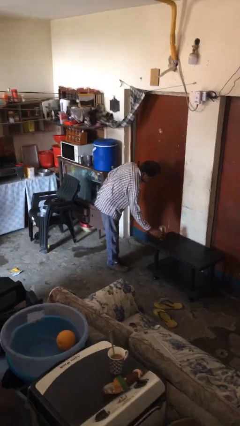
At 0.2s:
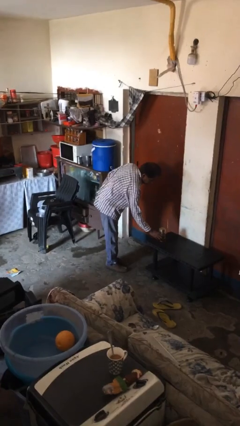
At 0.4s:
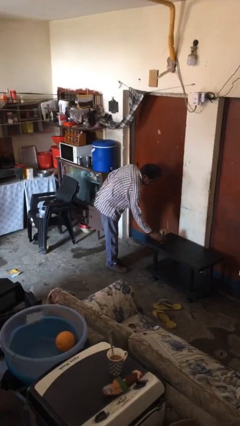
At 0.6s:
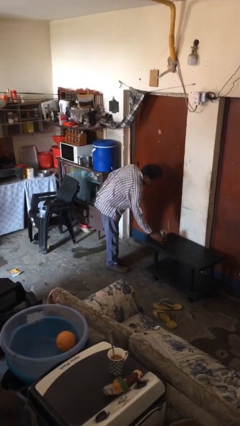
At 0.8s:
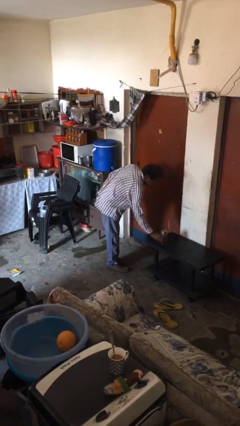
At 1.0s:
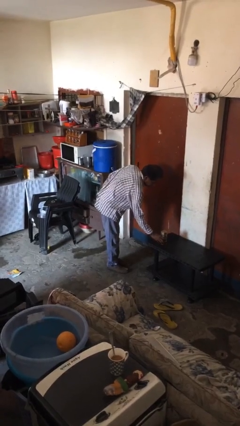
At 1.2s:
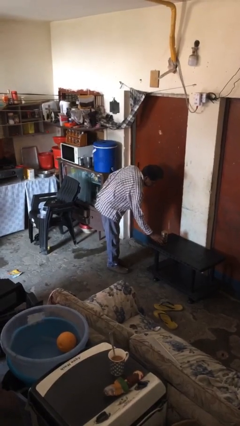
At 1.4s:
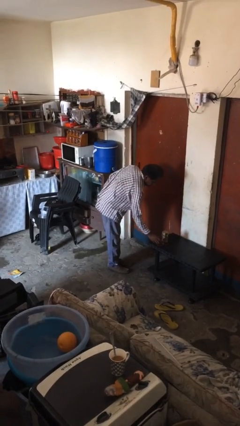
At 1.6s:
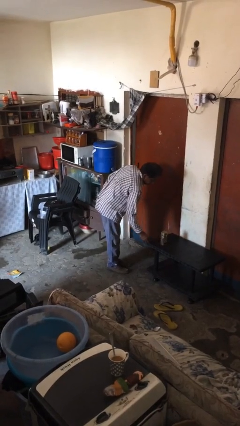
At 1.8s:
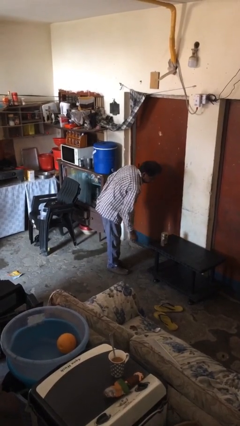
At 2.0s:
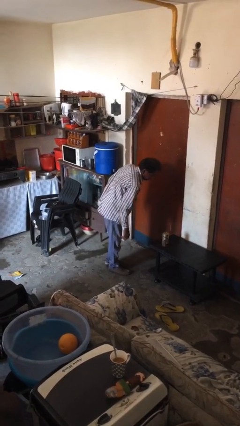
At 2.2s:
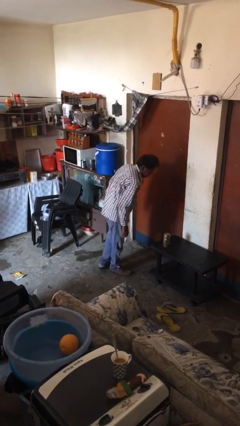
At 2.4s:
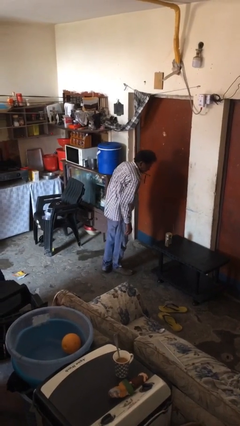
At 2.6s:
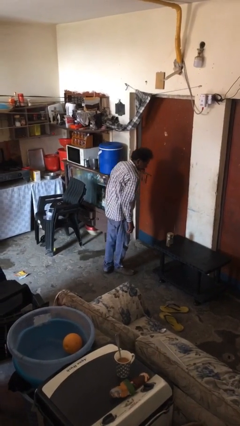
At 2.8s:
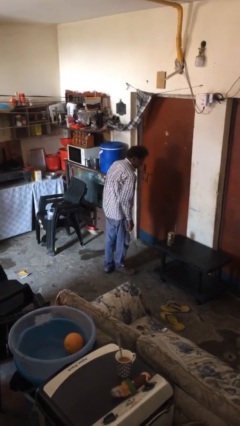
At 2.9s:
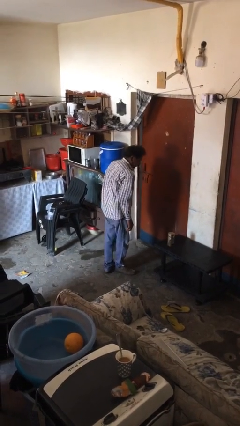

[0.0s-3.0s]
person puts down object on table

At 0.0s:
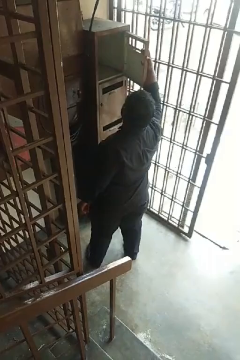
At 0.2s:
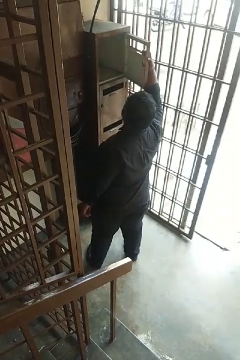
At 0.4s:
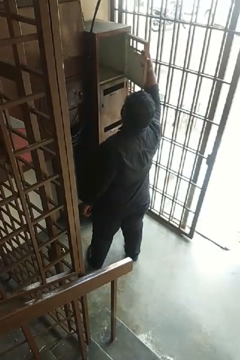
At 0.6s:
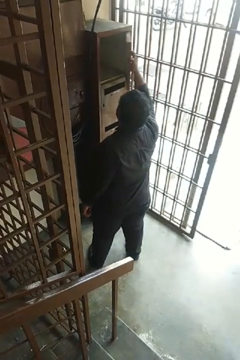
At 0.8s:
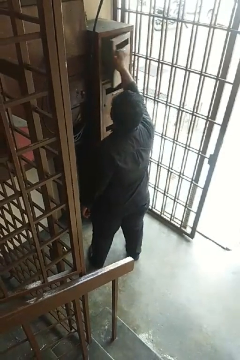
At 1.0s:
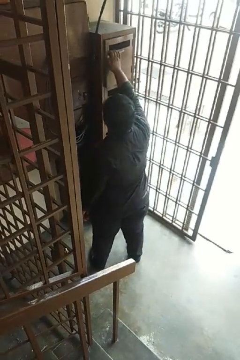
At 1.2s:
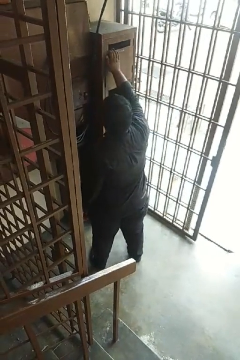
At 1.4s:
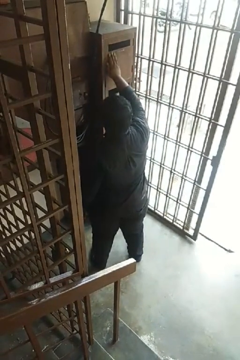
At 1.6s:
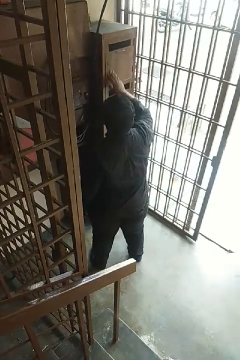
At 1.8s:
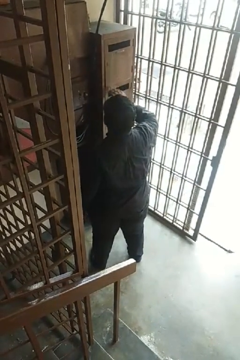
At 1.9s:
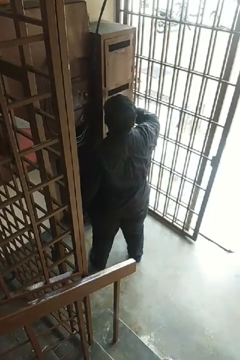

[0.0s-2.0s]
person closes mailbox

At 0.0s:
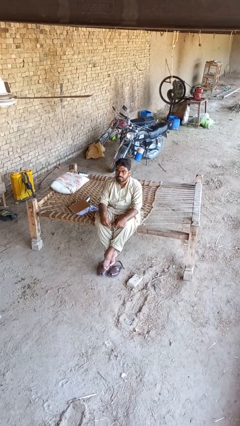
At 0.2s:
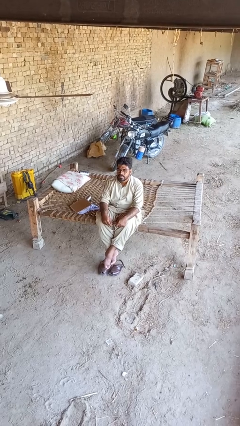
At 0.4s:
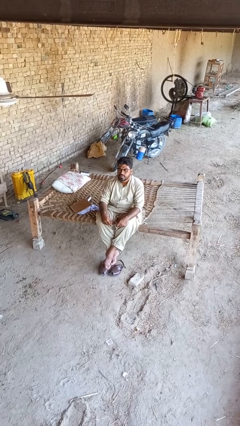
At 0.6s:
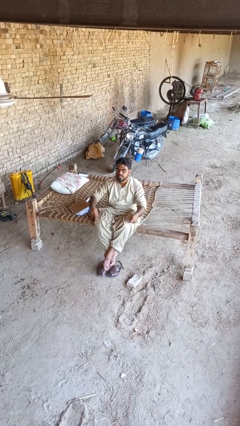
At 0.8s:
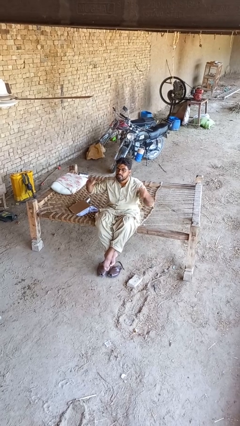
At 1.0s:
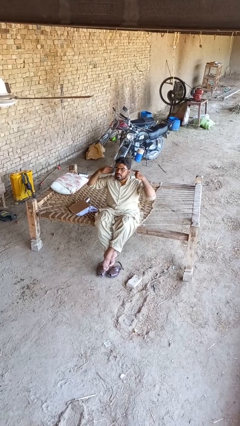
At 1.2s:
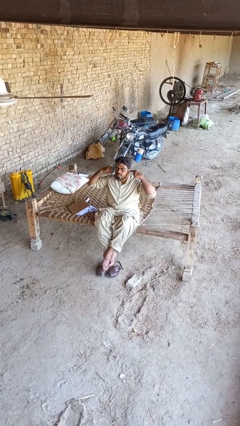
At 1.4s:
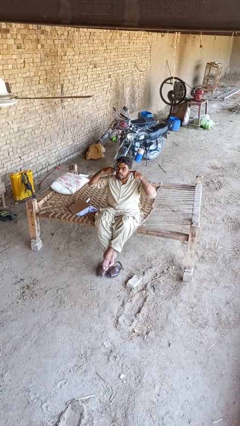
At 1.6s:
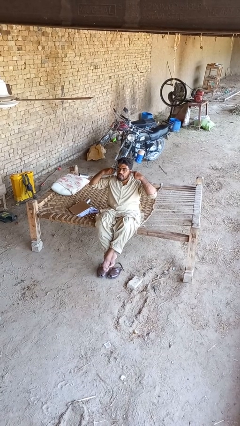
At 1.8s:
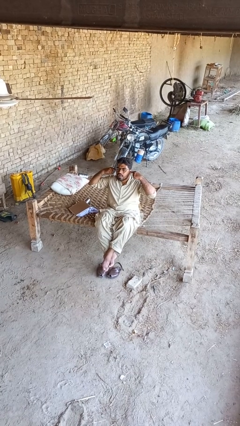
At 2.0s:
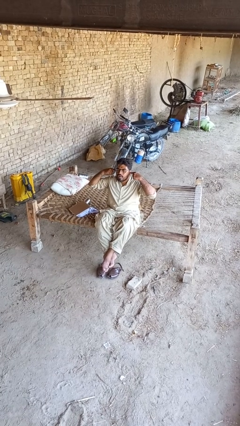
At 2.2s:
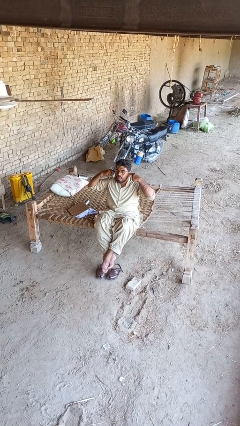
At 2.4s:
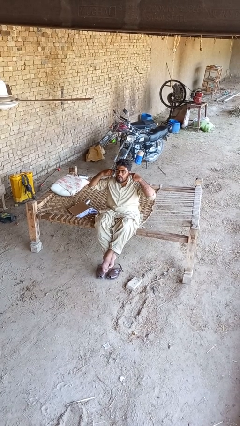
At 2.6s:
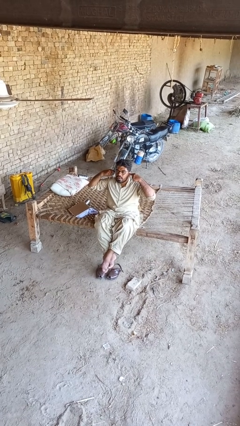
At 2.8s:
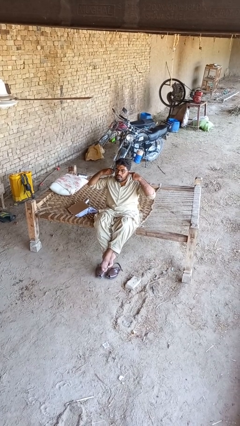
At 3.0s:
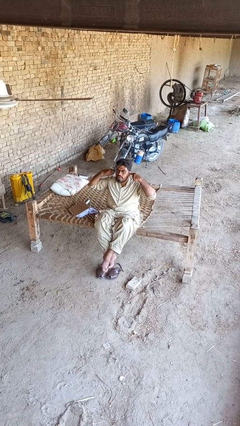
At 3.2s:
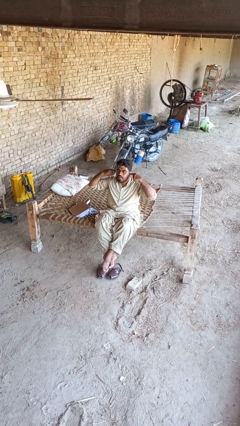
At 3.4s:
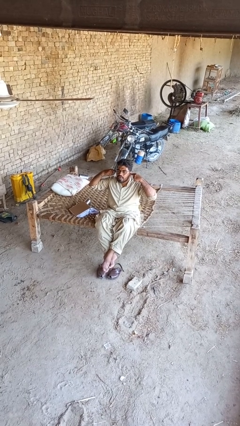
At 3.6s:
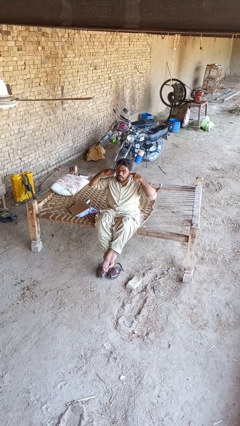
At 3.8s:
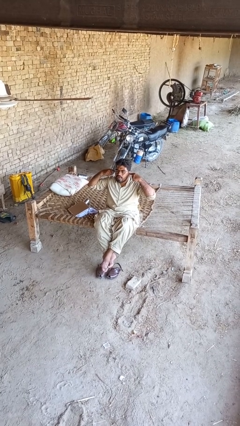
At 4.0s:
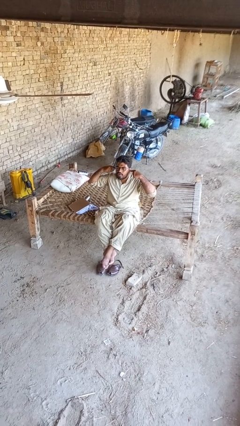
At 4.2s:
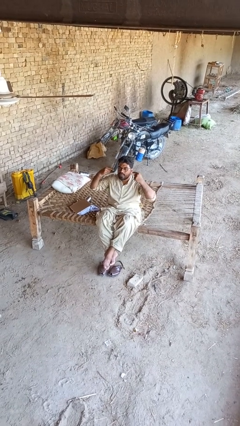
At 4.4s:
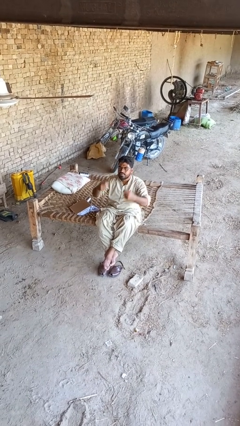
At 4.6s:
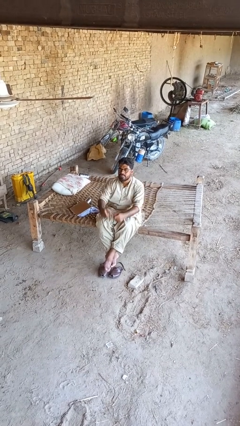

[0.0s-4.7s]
person puts fingers in ear

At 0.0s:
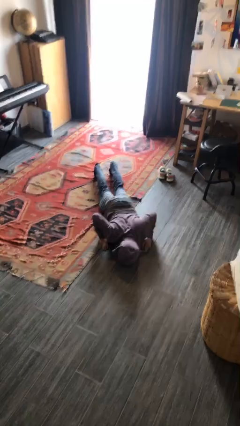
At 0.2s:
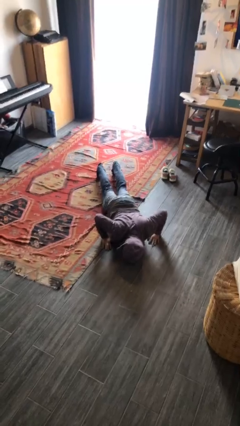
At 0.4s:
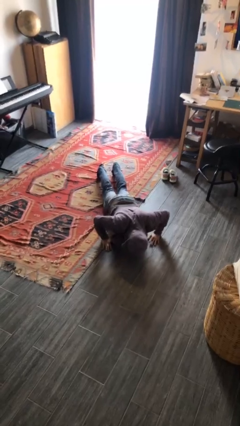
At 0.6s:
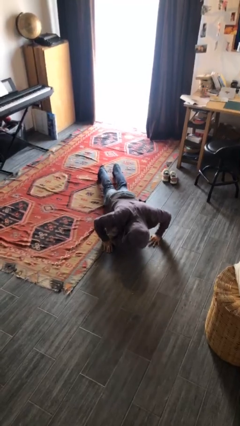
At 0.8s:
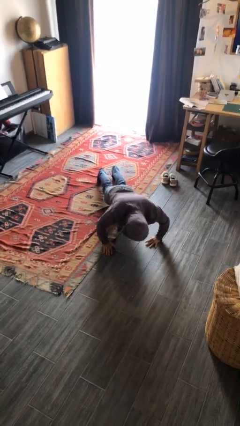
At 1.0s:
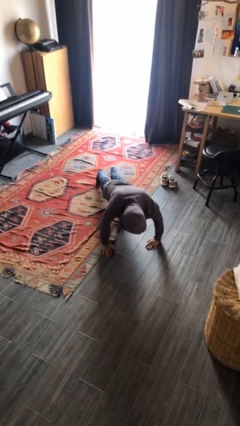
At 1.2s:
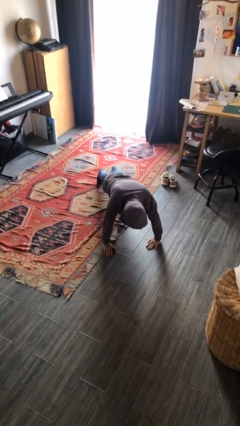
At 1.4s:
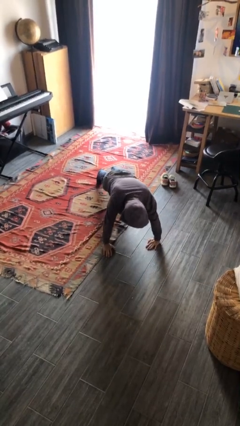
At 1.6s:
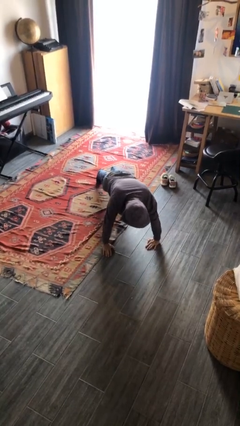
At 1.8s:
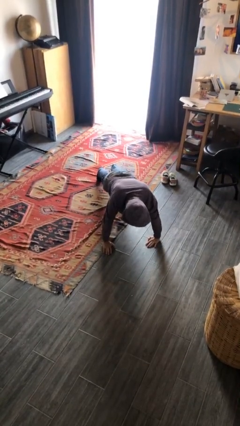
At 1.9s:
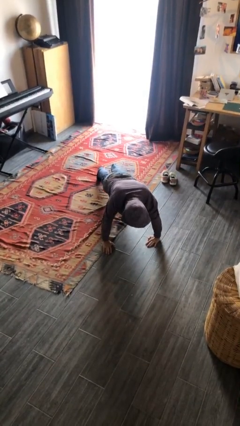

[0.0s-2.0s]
person exercises with pushup

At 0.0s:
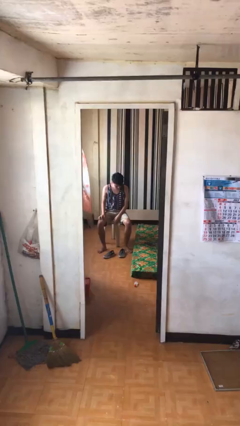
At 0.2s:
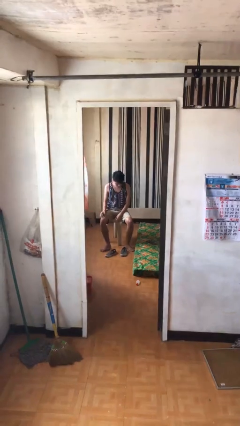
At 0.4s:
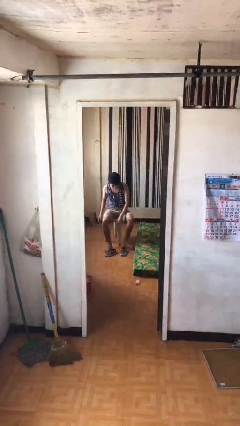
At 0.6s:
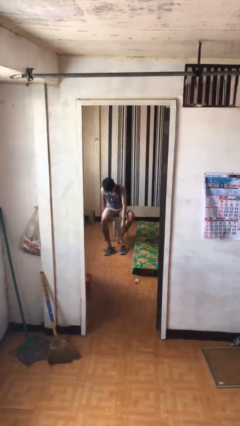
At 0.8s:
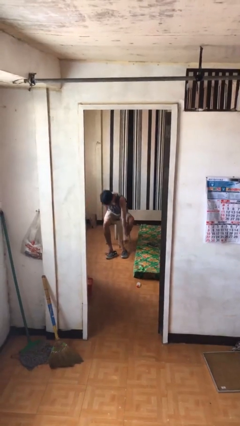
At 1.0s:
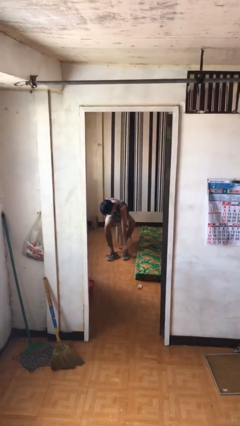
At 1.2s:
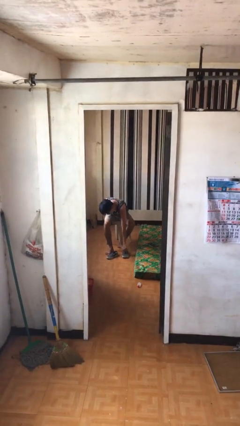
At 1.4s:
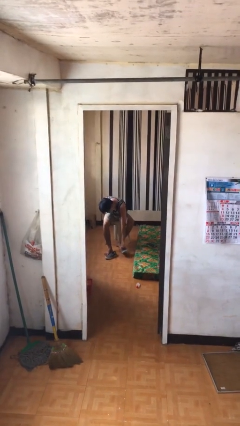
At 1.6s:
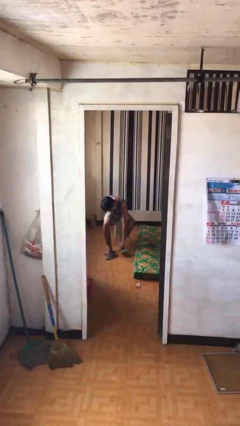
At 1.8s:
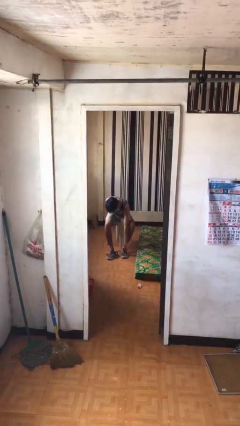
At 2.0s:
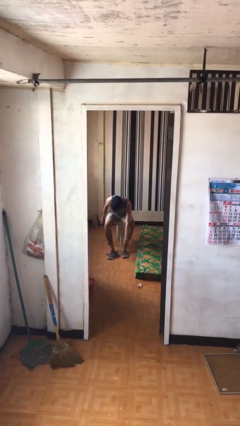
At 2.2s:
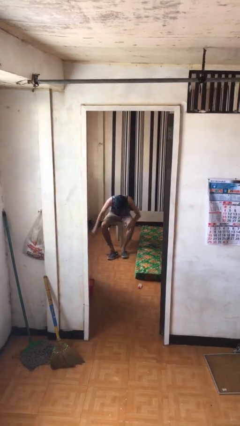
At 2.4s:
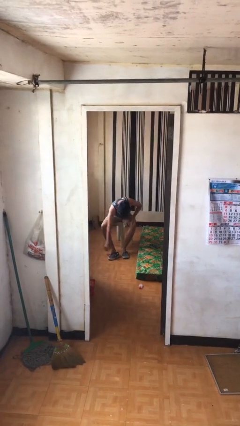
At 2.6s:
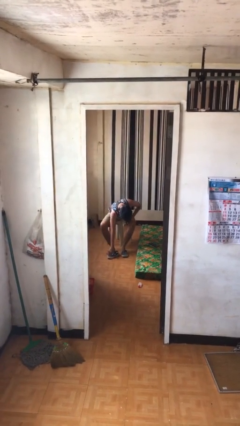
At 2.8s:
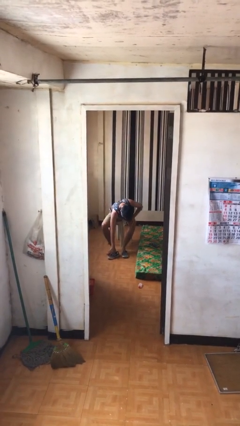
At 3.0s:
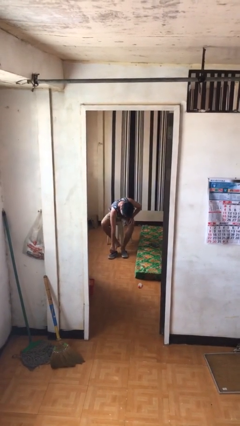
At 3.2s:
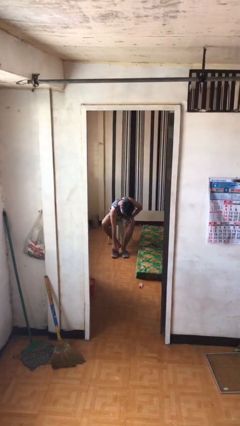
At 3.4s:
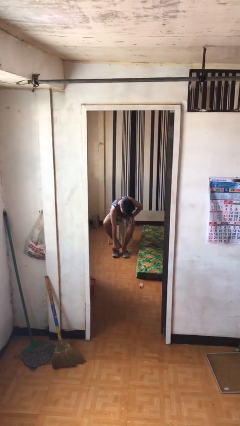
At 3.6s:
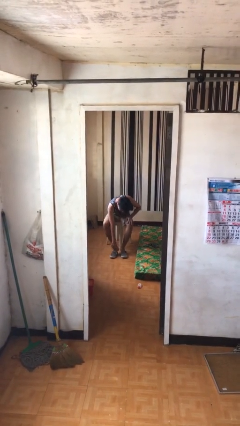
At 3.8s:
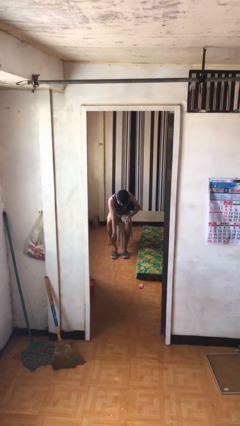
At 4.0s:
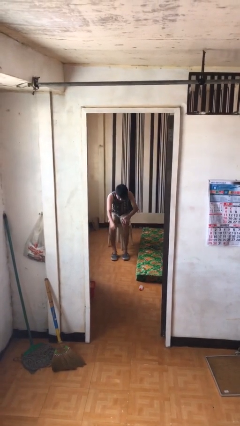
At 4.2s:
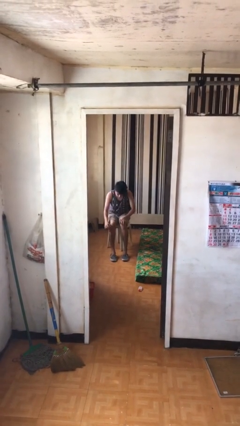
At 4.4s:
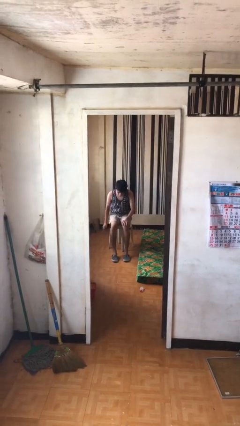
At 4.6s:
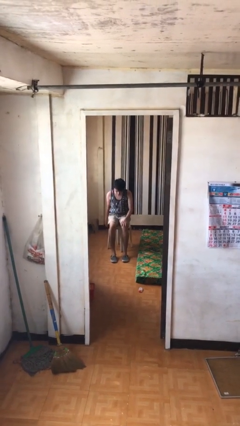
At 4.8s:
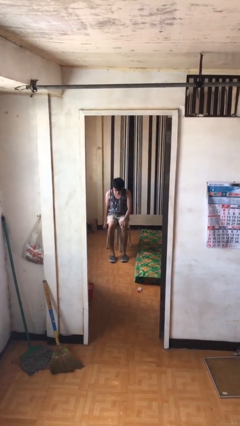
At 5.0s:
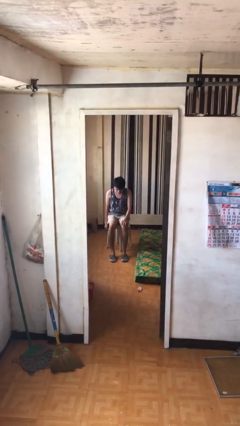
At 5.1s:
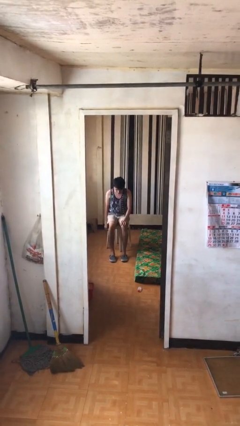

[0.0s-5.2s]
person puts on shoes

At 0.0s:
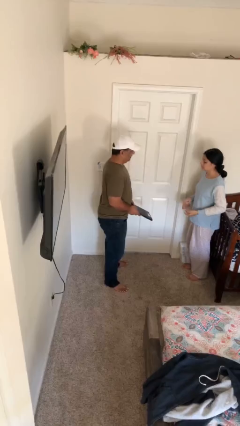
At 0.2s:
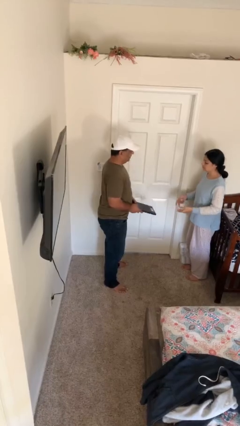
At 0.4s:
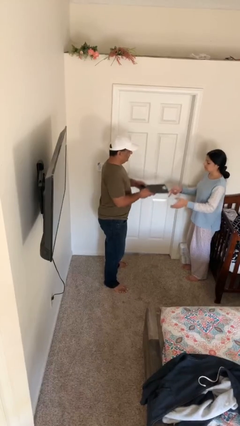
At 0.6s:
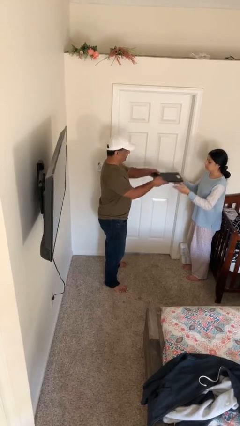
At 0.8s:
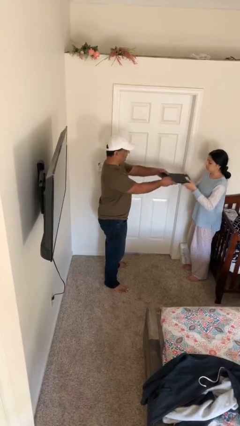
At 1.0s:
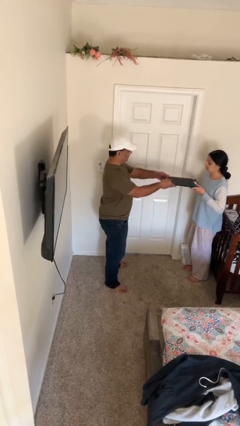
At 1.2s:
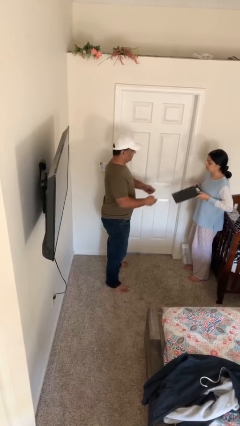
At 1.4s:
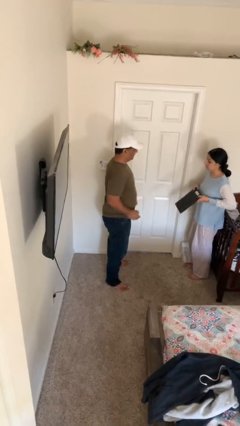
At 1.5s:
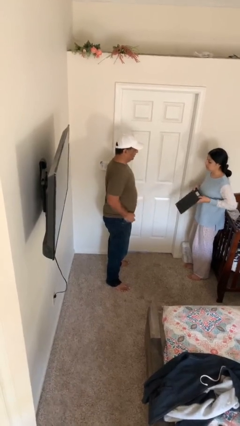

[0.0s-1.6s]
person transfers object to person
